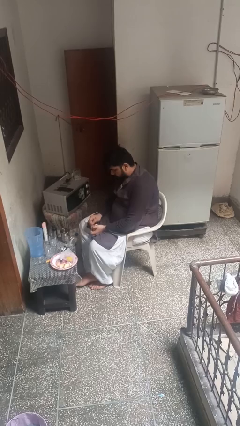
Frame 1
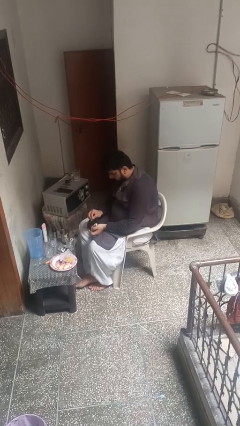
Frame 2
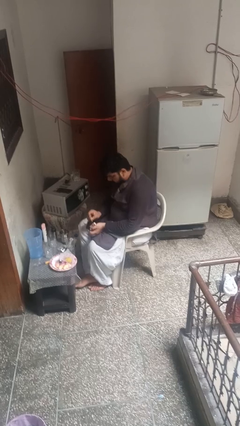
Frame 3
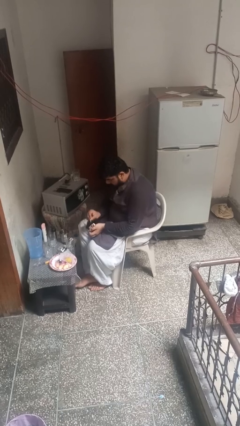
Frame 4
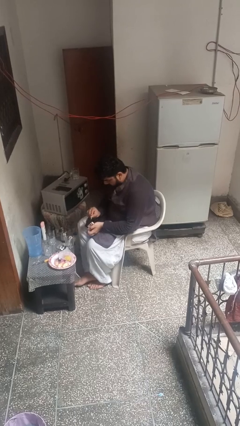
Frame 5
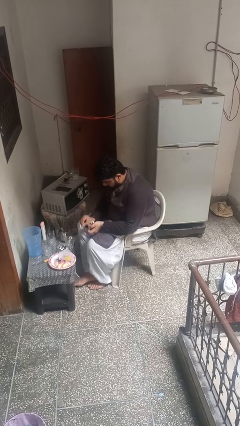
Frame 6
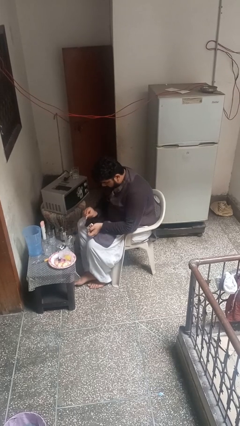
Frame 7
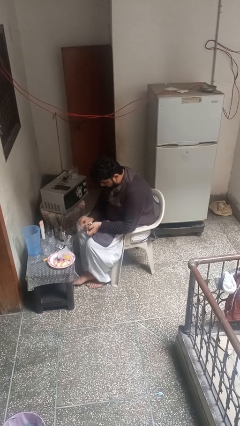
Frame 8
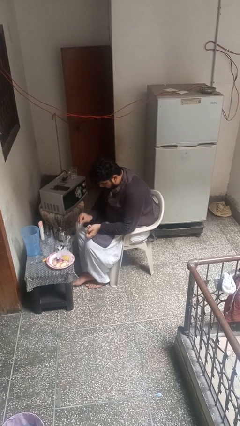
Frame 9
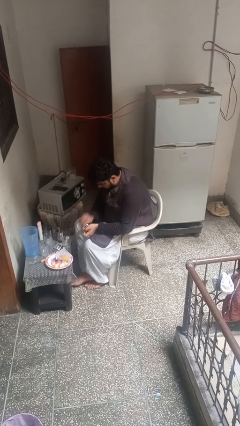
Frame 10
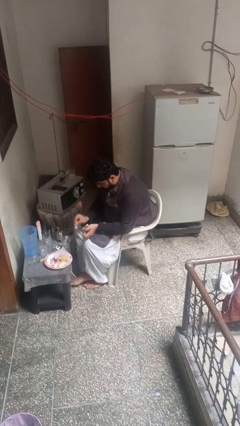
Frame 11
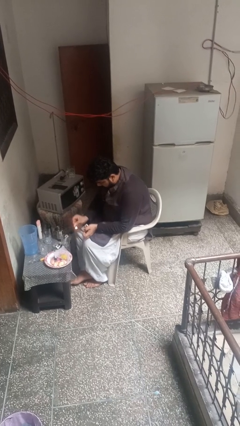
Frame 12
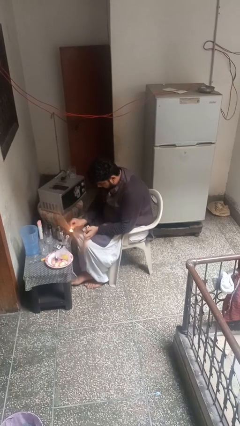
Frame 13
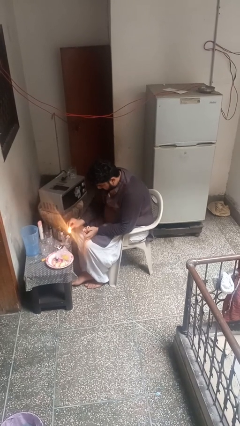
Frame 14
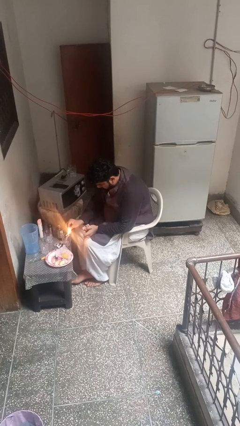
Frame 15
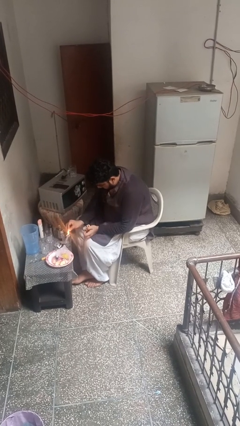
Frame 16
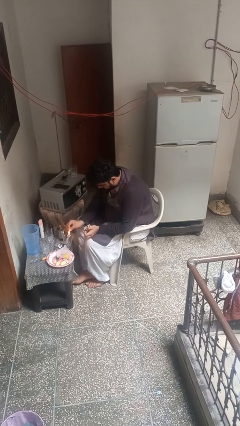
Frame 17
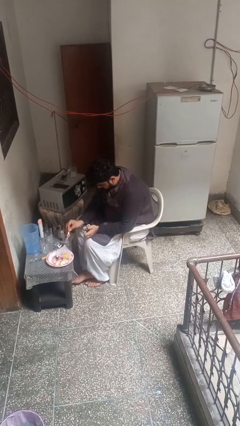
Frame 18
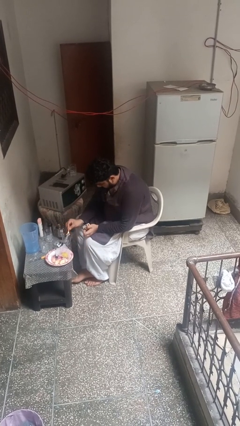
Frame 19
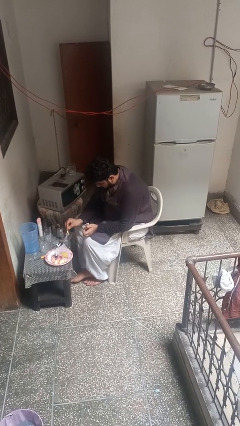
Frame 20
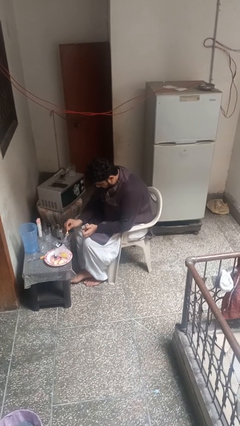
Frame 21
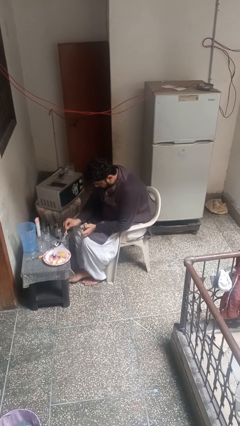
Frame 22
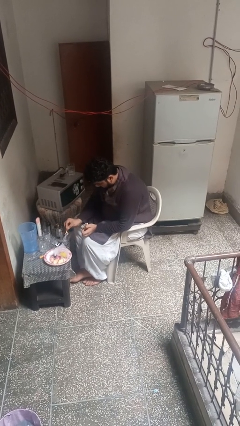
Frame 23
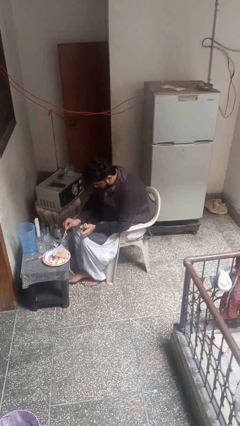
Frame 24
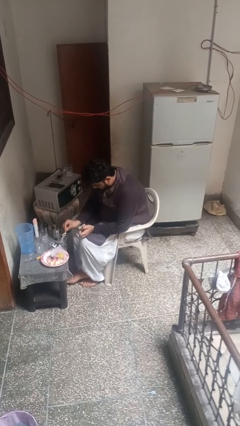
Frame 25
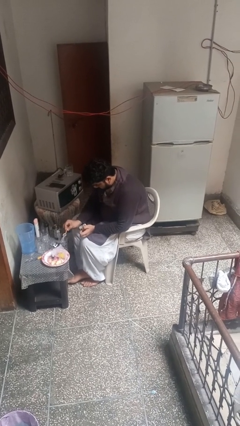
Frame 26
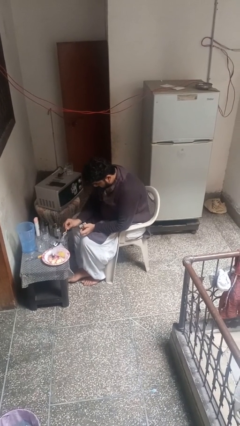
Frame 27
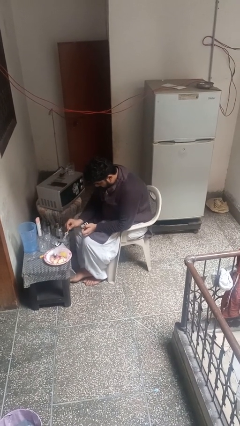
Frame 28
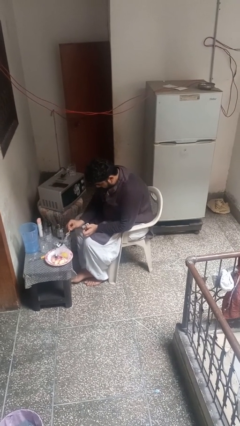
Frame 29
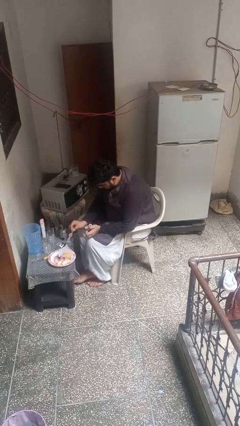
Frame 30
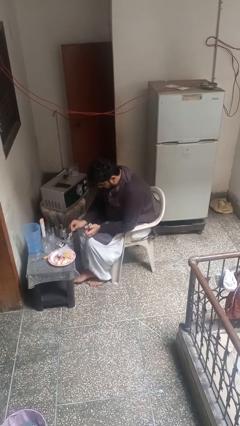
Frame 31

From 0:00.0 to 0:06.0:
person lights candle

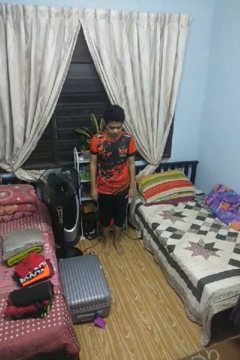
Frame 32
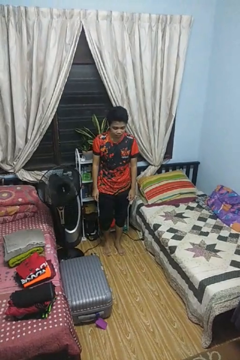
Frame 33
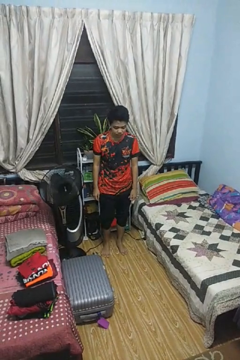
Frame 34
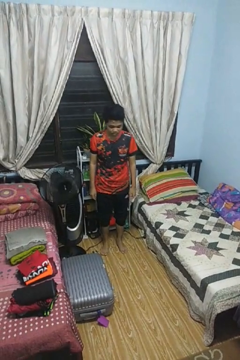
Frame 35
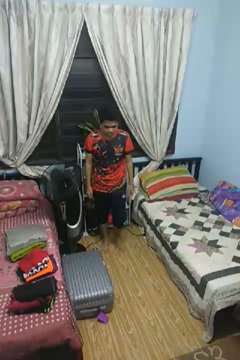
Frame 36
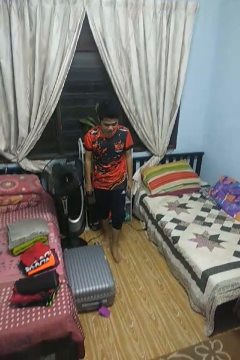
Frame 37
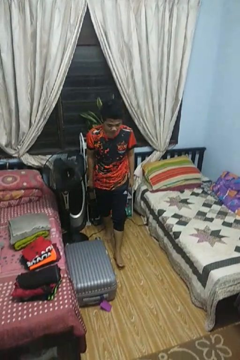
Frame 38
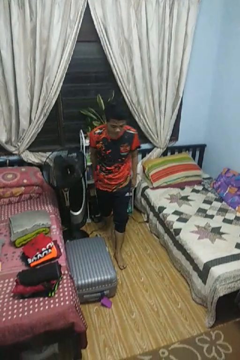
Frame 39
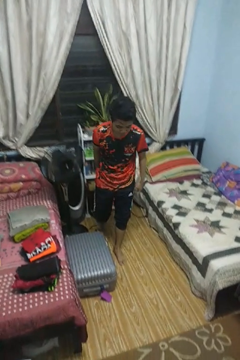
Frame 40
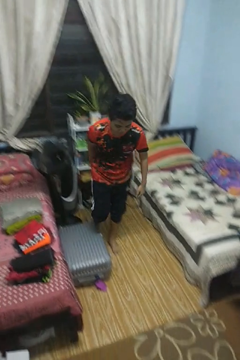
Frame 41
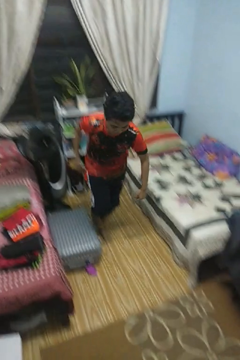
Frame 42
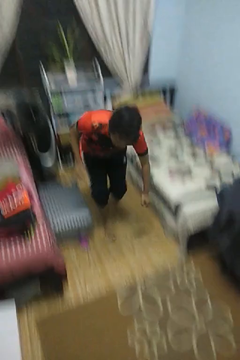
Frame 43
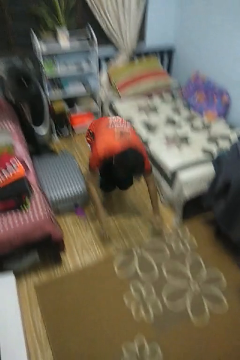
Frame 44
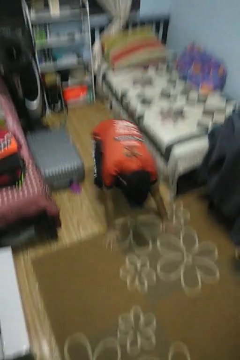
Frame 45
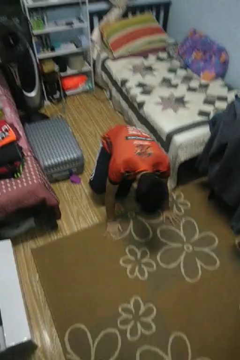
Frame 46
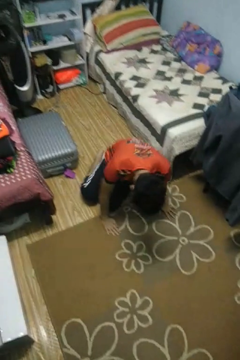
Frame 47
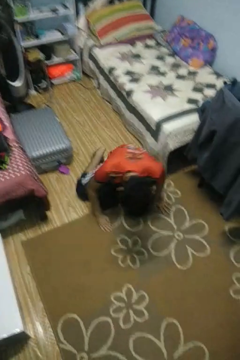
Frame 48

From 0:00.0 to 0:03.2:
person trips on object on floor

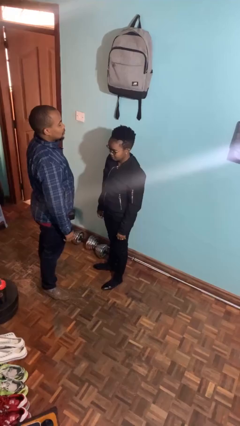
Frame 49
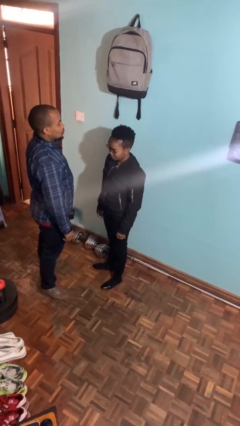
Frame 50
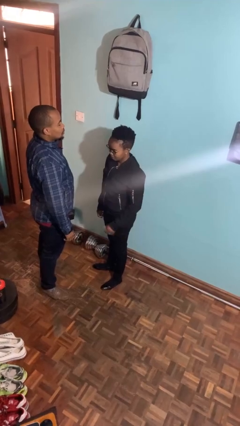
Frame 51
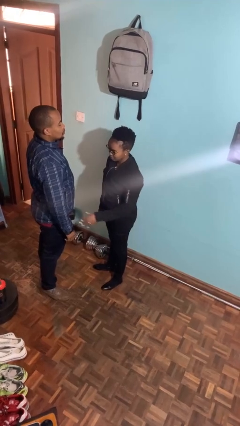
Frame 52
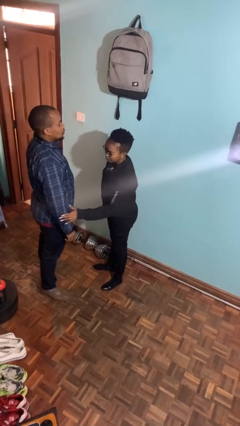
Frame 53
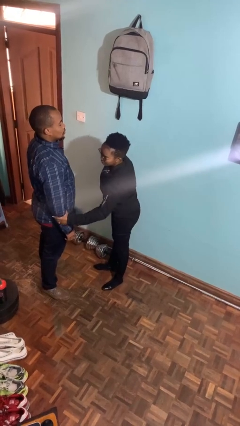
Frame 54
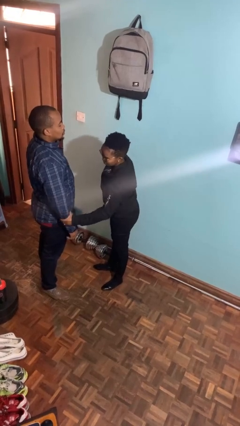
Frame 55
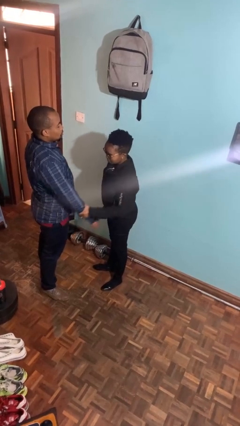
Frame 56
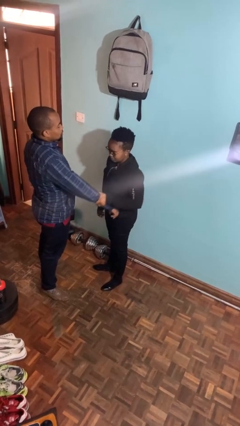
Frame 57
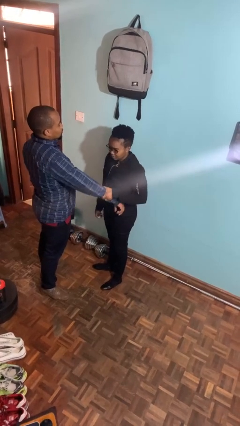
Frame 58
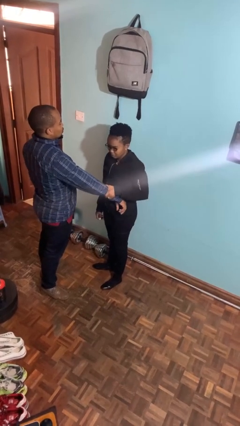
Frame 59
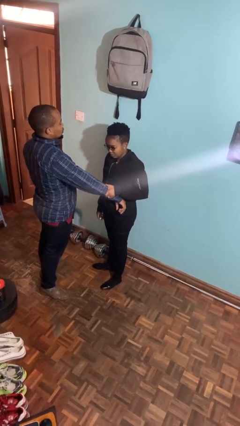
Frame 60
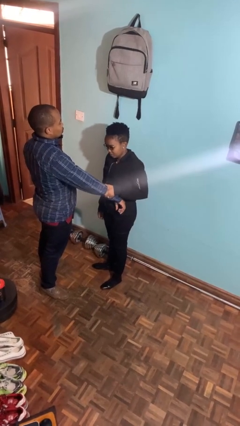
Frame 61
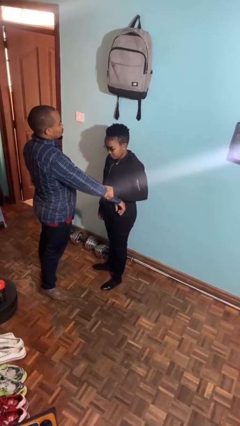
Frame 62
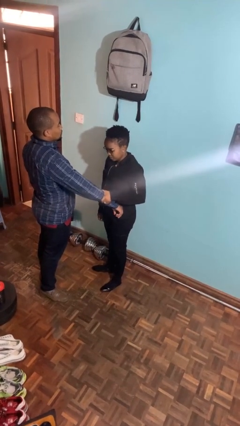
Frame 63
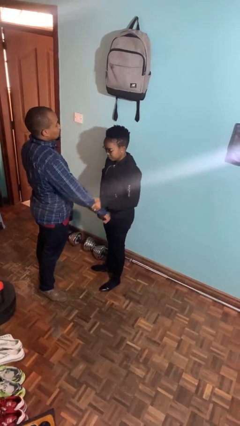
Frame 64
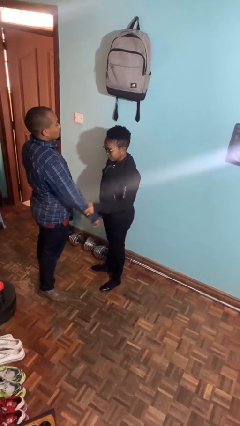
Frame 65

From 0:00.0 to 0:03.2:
person grabs person by forearm

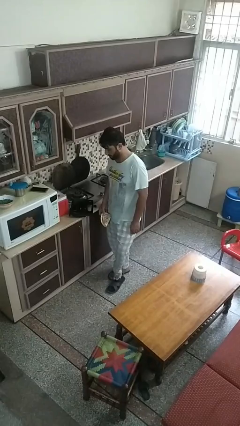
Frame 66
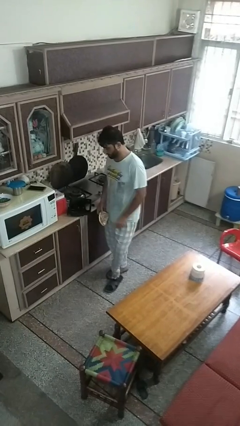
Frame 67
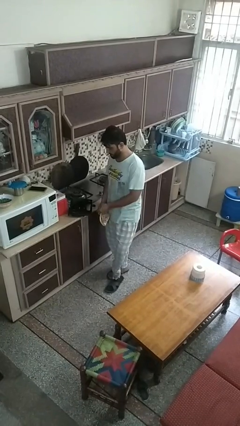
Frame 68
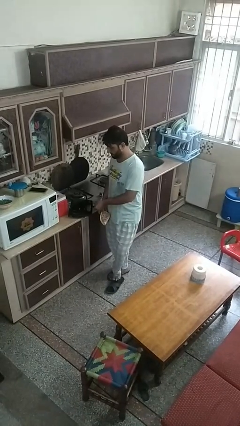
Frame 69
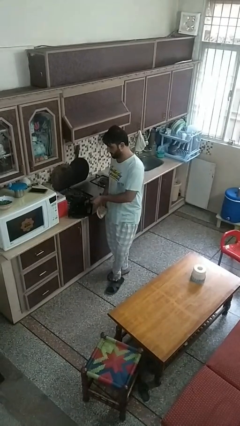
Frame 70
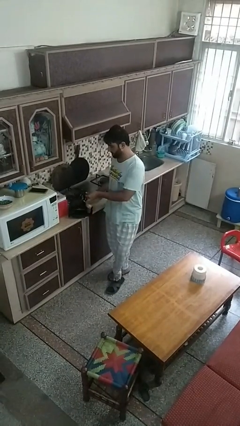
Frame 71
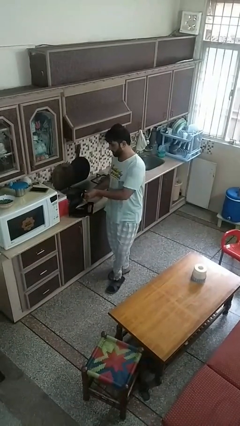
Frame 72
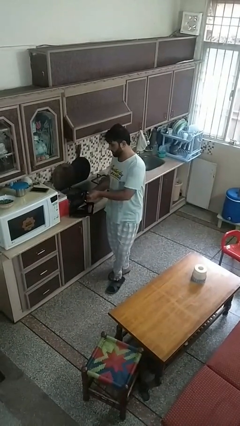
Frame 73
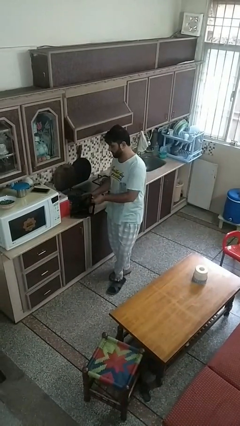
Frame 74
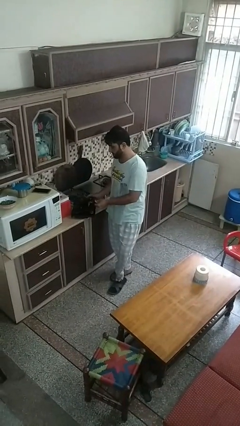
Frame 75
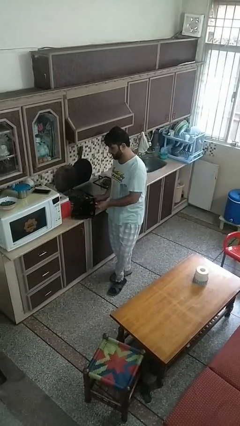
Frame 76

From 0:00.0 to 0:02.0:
person puts object into toaster

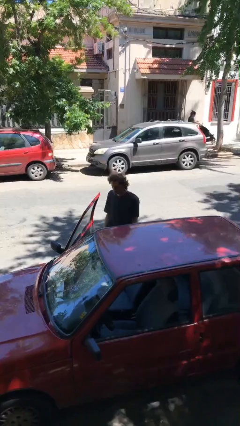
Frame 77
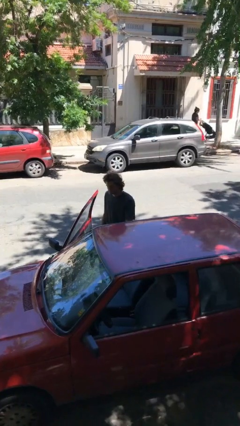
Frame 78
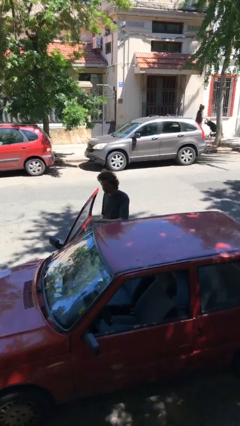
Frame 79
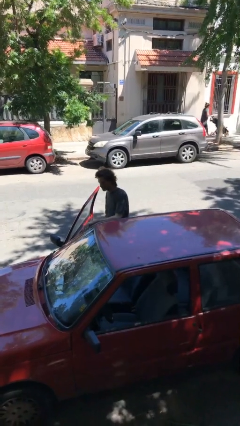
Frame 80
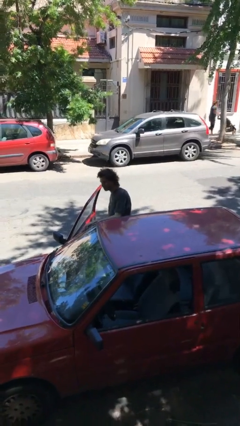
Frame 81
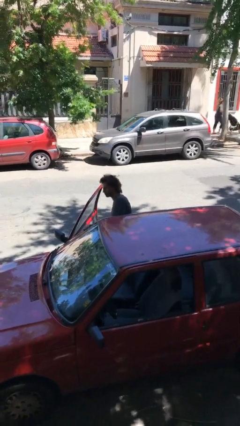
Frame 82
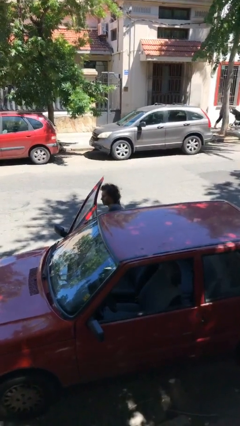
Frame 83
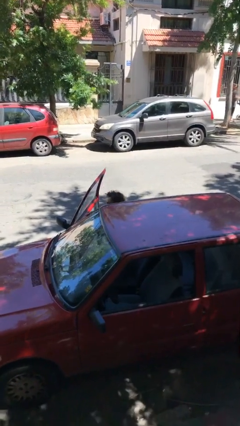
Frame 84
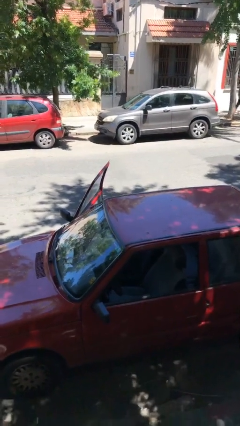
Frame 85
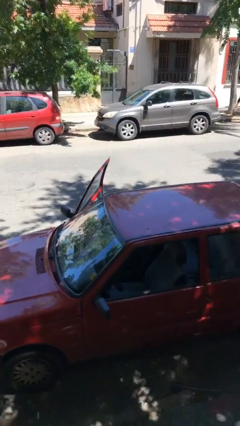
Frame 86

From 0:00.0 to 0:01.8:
person enters car

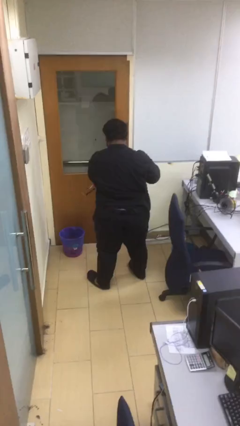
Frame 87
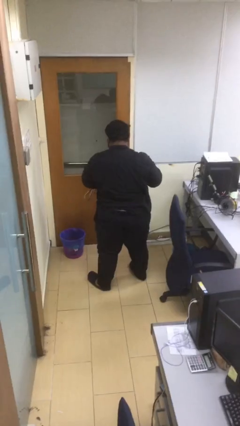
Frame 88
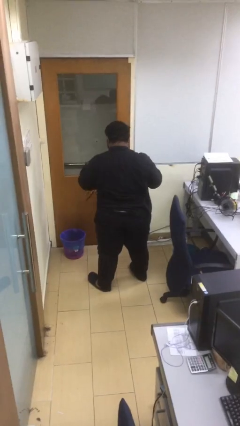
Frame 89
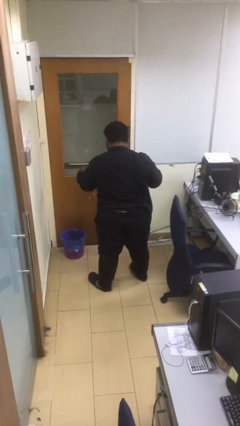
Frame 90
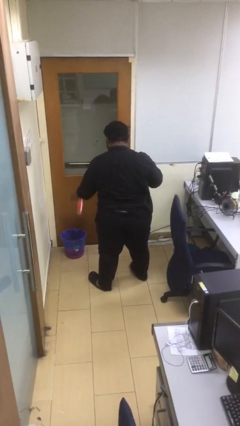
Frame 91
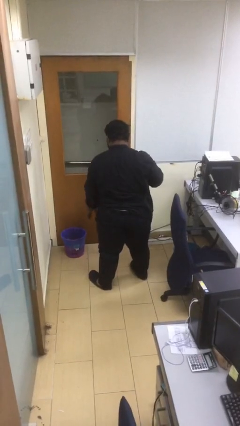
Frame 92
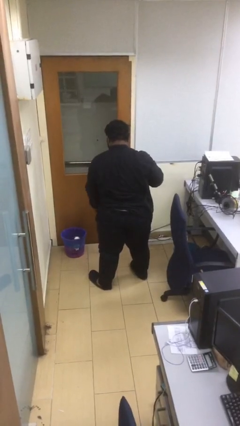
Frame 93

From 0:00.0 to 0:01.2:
person discards trash

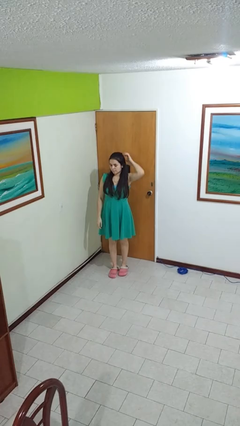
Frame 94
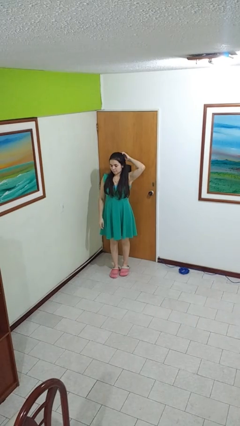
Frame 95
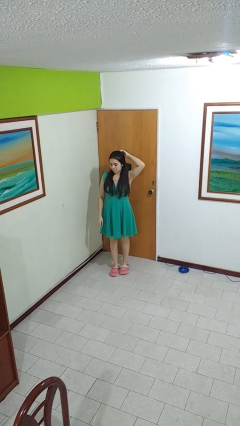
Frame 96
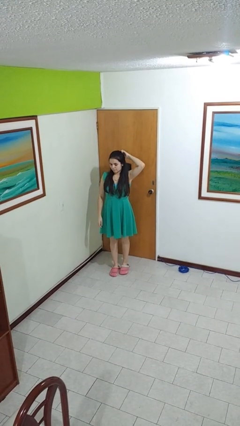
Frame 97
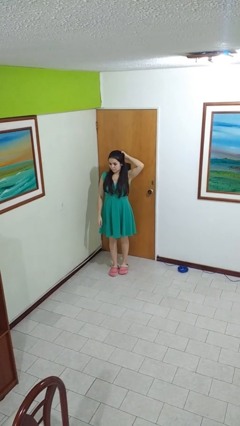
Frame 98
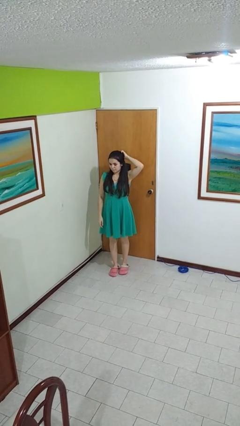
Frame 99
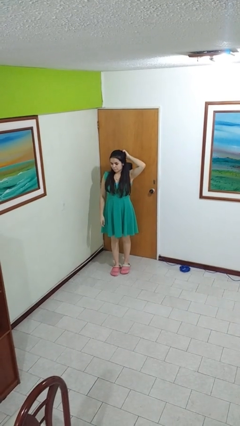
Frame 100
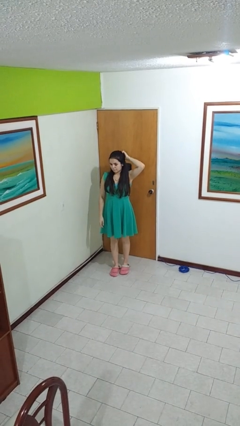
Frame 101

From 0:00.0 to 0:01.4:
person scratches face
